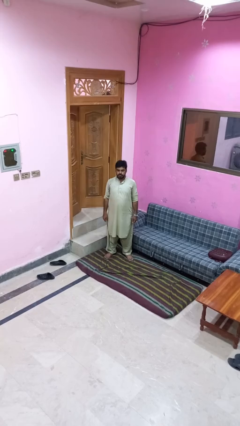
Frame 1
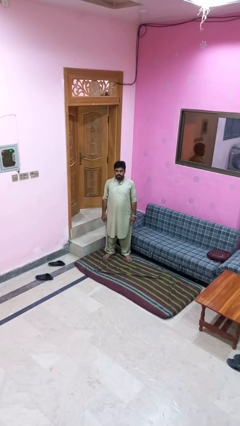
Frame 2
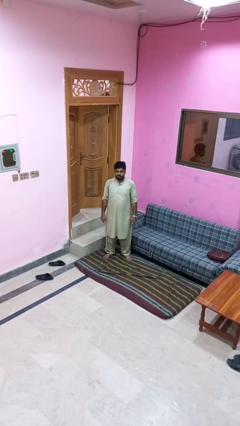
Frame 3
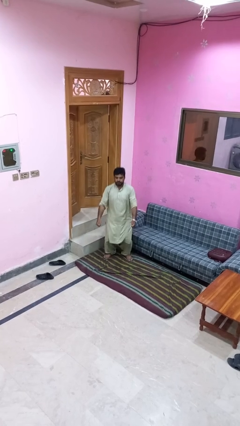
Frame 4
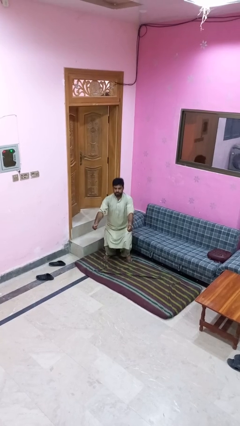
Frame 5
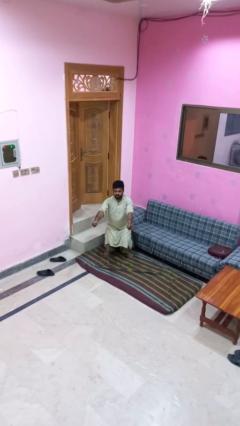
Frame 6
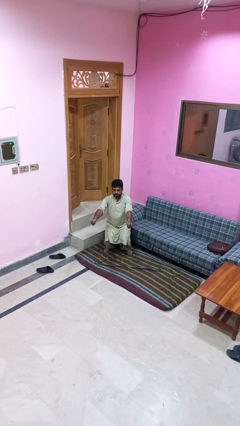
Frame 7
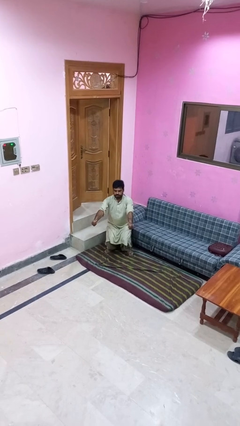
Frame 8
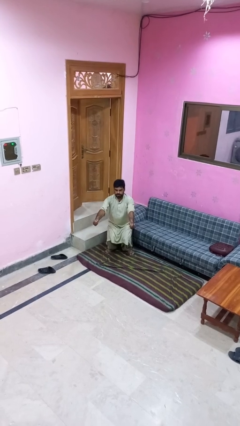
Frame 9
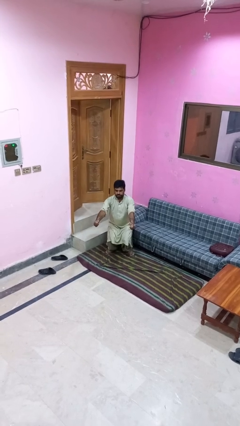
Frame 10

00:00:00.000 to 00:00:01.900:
person squats

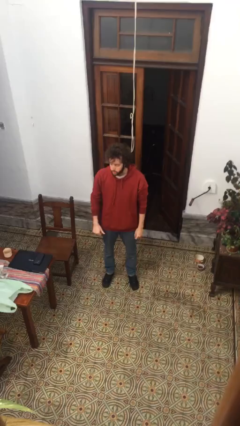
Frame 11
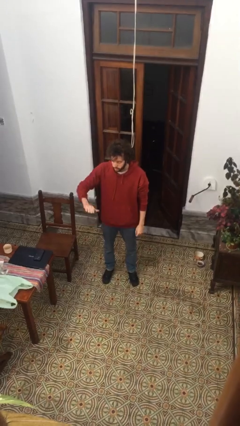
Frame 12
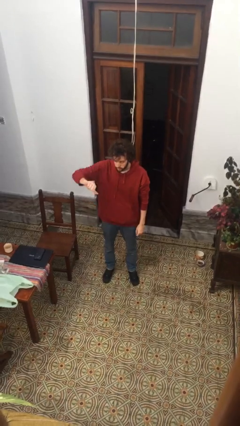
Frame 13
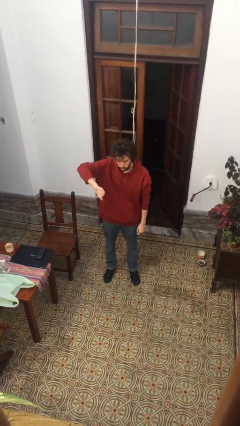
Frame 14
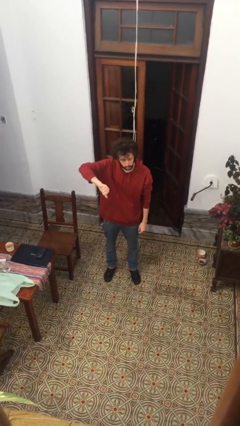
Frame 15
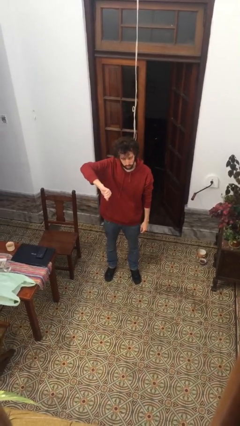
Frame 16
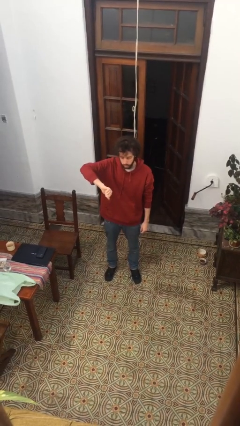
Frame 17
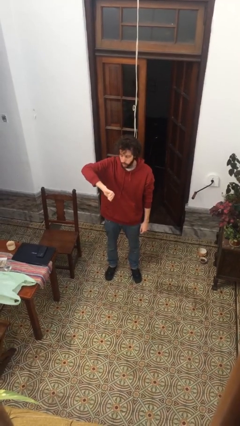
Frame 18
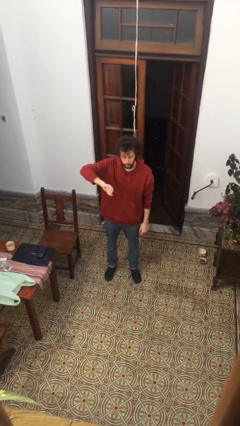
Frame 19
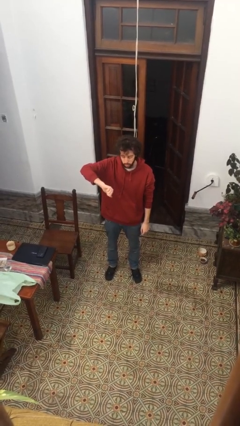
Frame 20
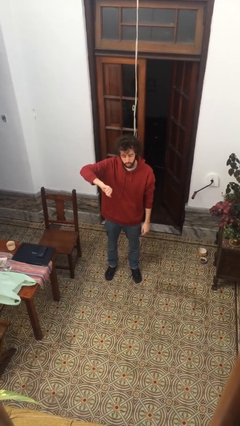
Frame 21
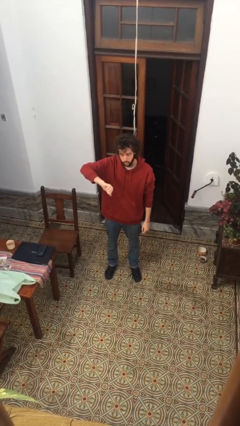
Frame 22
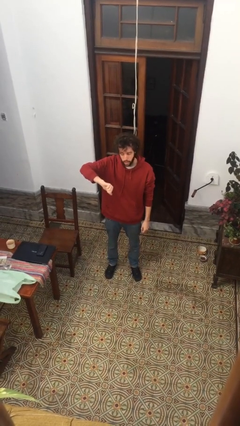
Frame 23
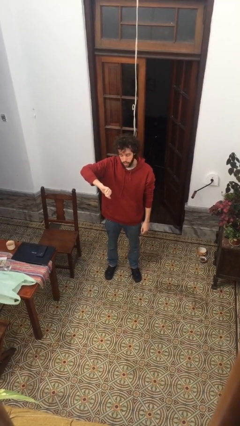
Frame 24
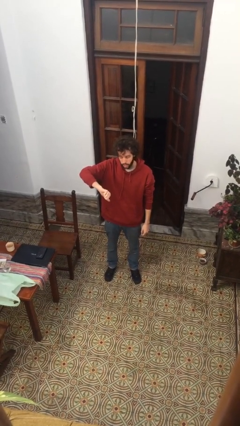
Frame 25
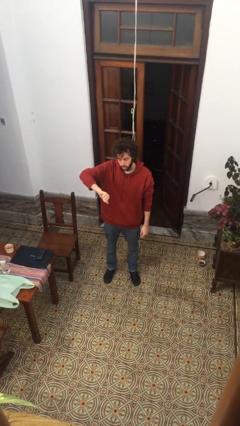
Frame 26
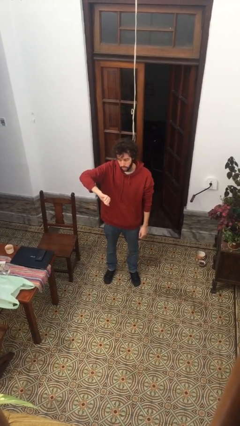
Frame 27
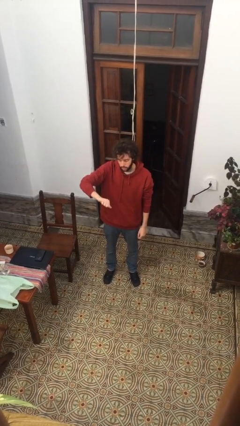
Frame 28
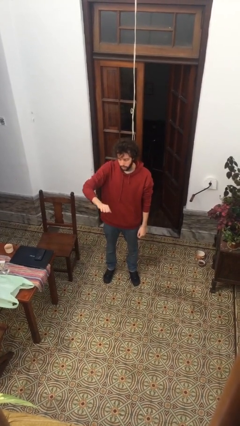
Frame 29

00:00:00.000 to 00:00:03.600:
person gestures thumbs down

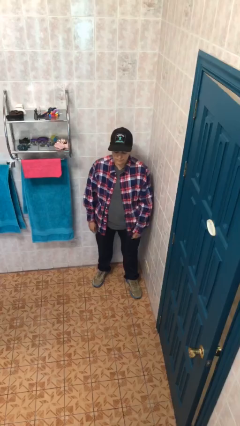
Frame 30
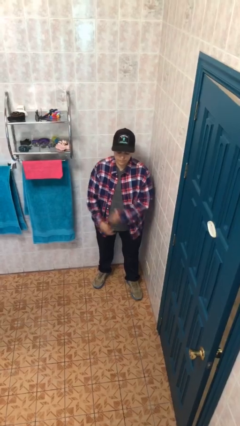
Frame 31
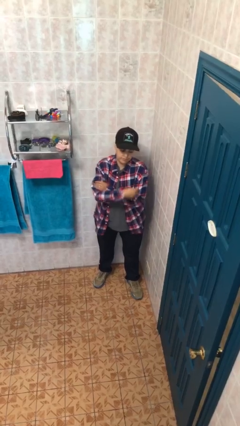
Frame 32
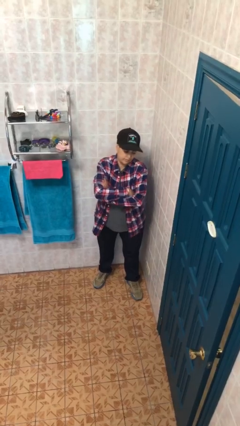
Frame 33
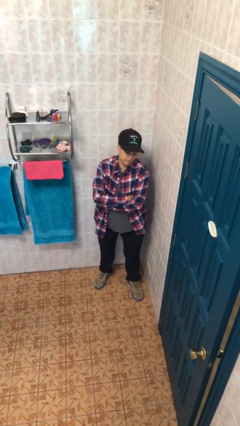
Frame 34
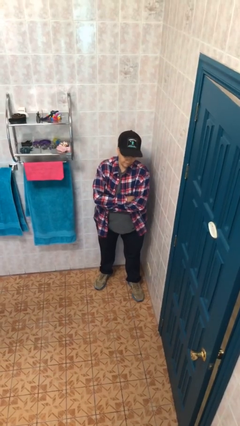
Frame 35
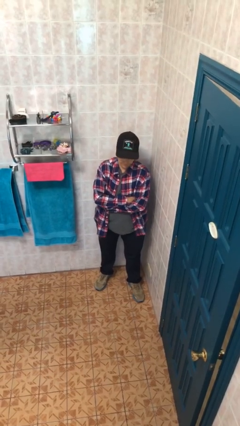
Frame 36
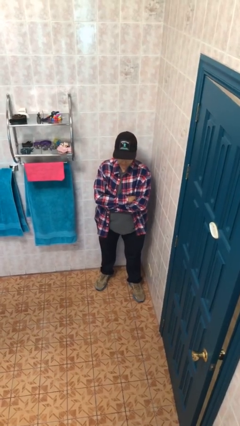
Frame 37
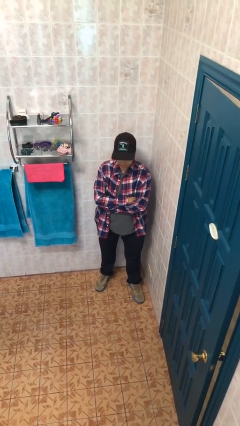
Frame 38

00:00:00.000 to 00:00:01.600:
person crosses arms

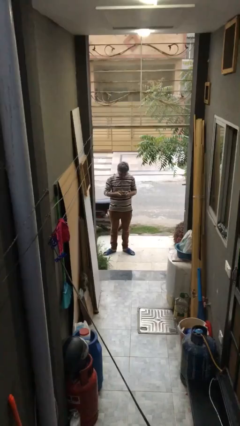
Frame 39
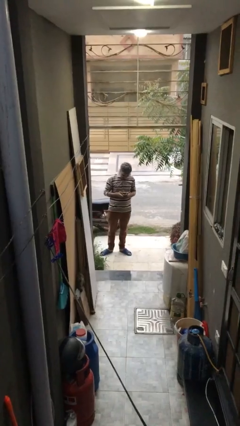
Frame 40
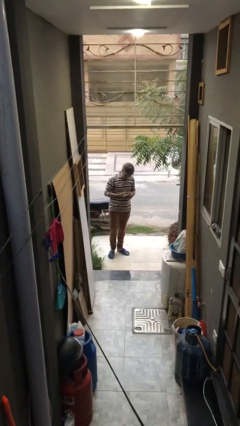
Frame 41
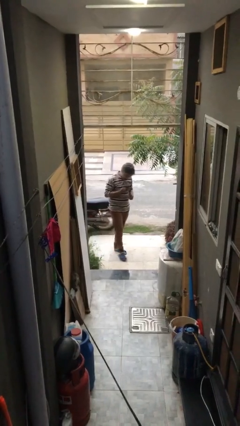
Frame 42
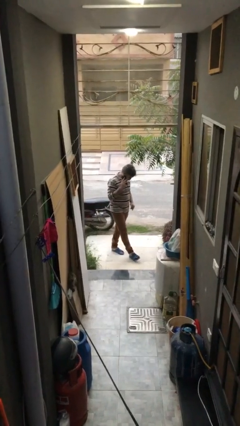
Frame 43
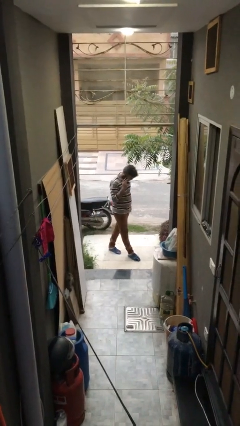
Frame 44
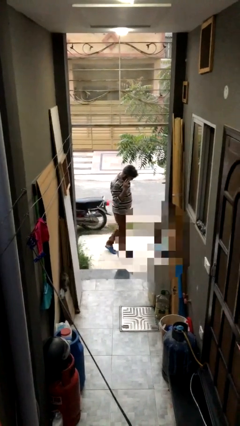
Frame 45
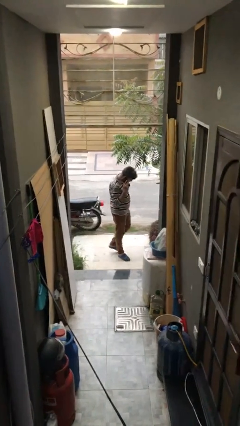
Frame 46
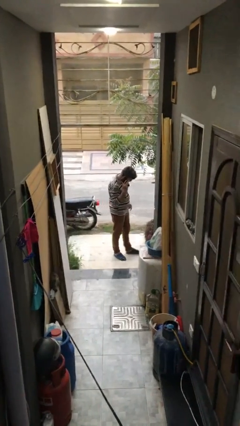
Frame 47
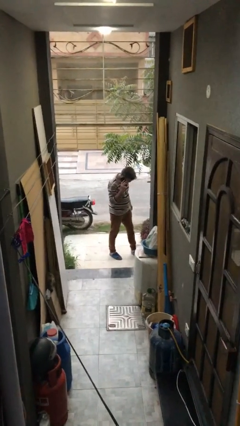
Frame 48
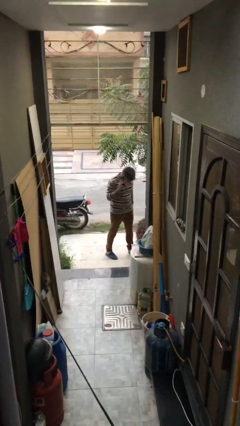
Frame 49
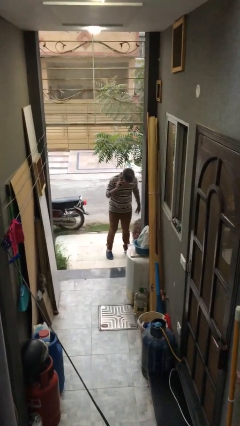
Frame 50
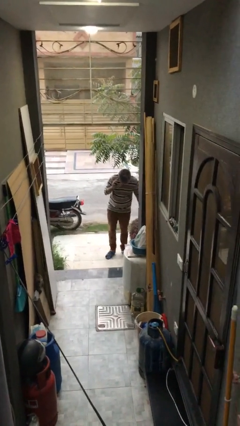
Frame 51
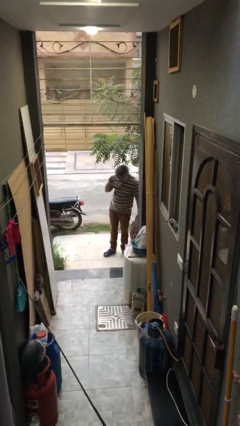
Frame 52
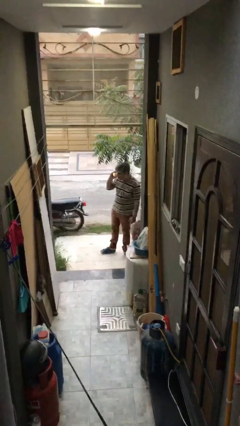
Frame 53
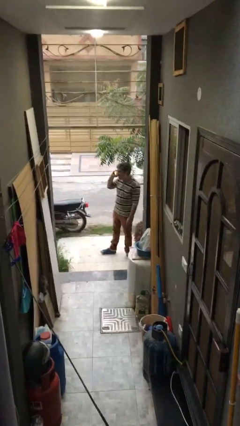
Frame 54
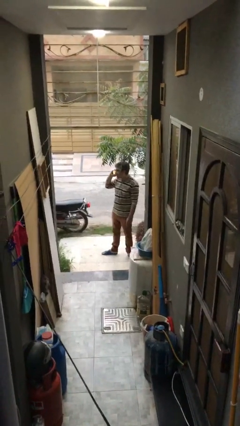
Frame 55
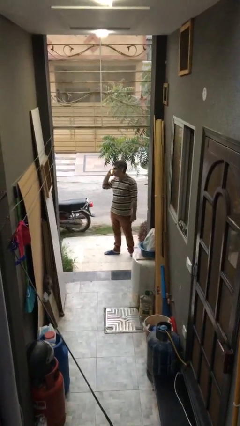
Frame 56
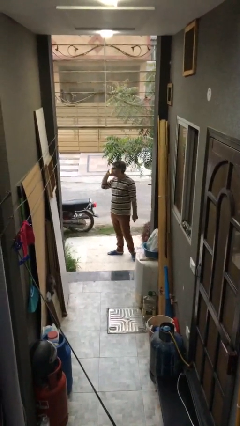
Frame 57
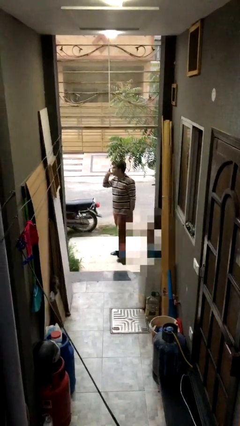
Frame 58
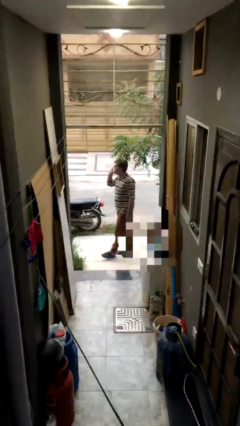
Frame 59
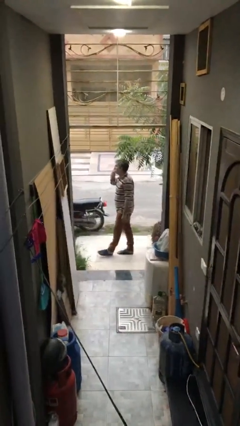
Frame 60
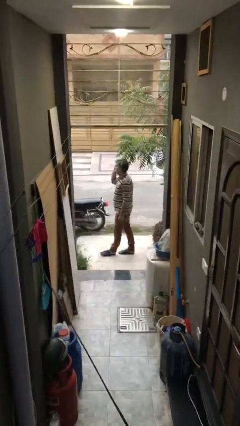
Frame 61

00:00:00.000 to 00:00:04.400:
person talks on phone

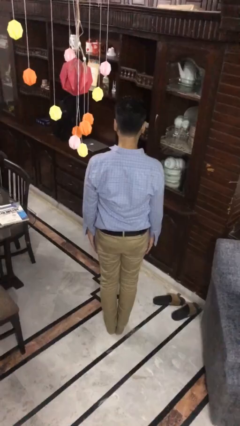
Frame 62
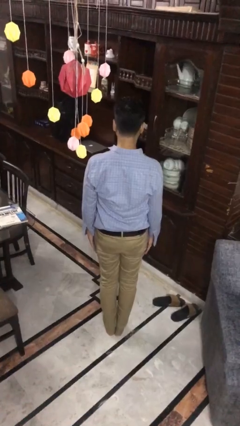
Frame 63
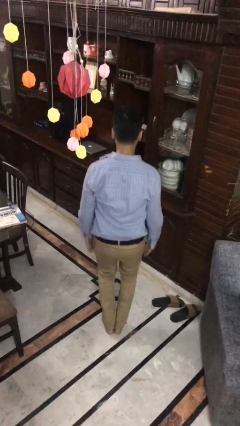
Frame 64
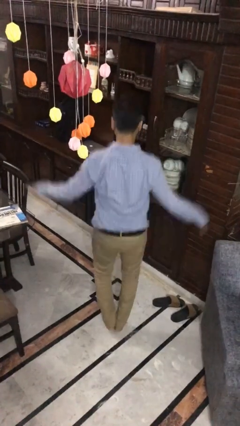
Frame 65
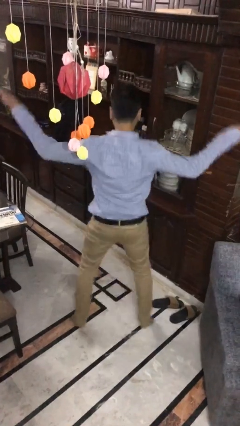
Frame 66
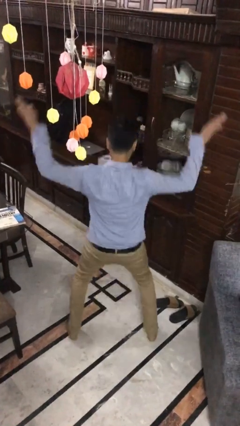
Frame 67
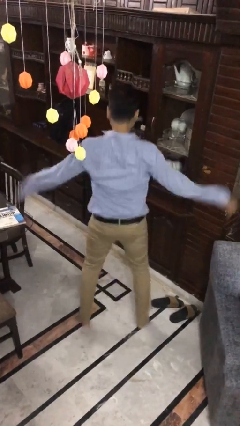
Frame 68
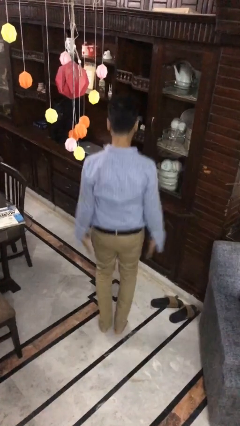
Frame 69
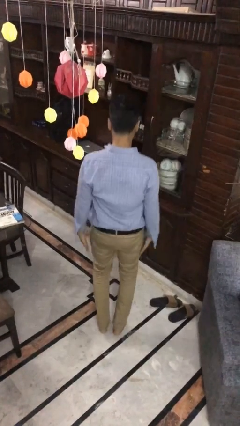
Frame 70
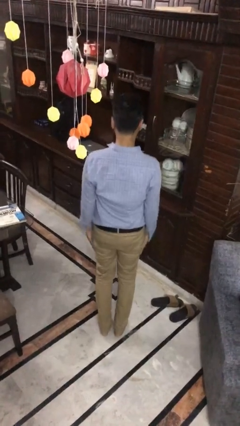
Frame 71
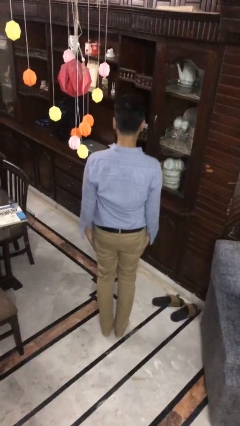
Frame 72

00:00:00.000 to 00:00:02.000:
person exercises with jumping jacks

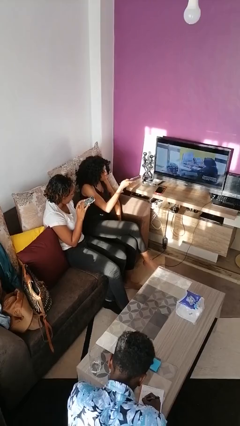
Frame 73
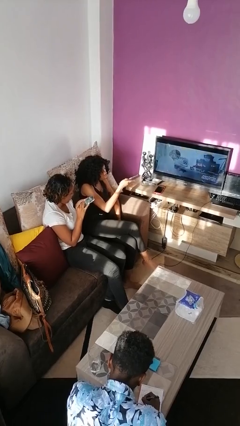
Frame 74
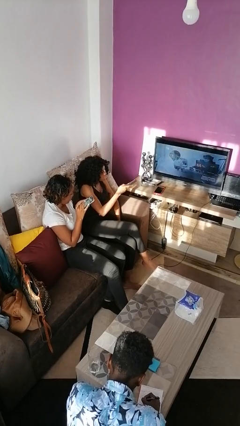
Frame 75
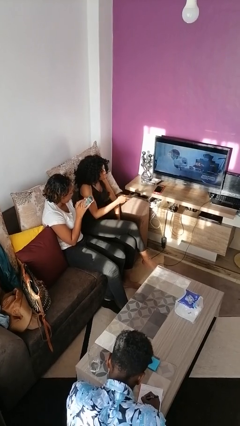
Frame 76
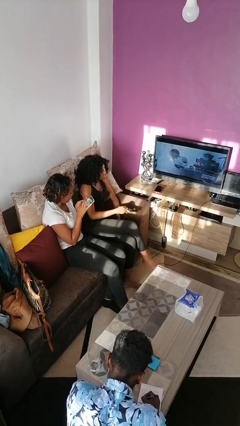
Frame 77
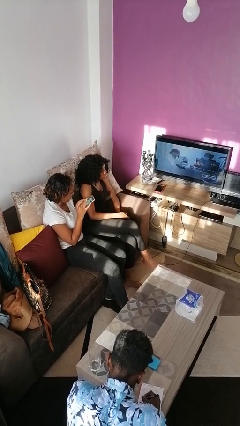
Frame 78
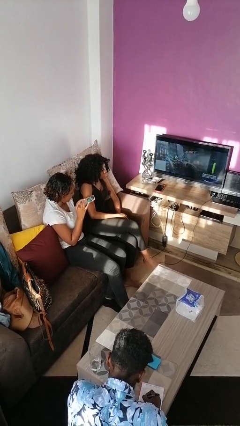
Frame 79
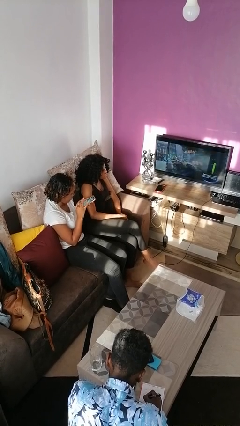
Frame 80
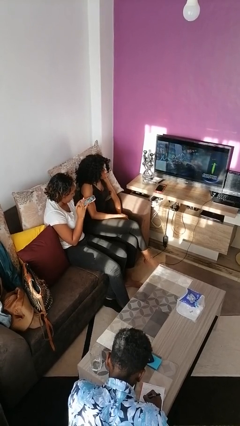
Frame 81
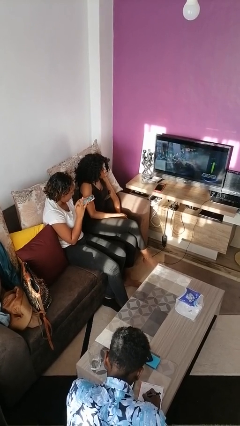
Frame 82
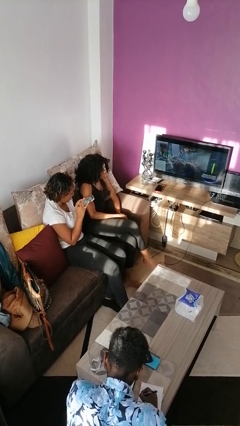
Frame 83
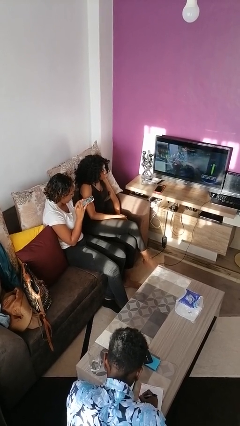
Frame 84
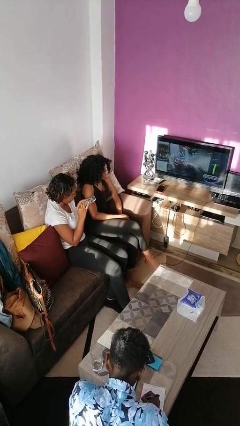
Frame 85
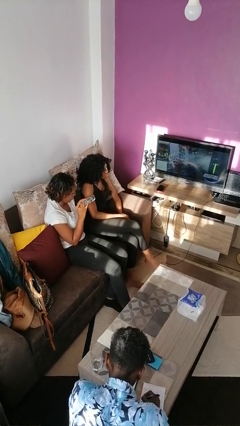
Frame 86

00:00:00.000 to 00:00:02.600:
person takes off boots

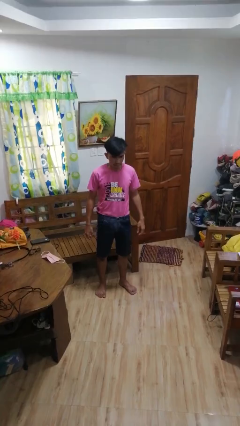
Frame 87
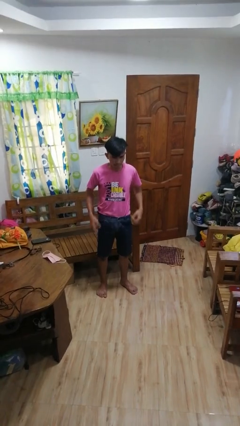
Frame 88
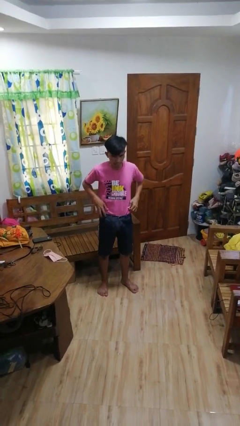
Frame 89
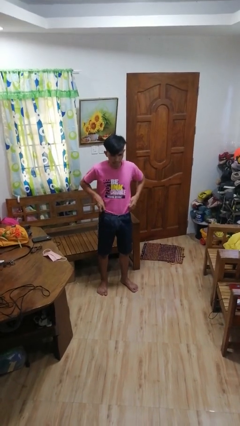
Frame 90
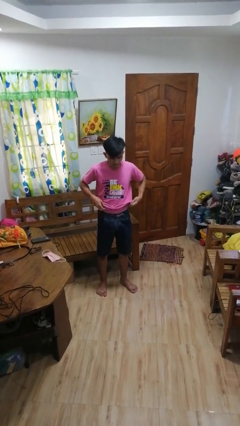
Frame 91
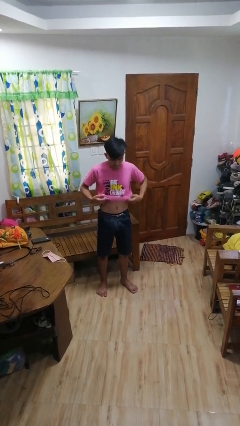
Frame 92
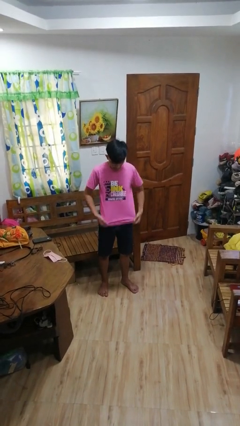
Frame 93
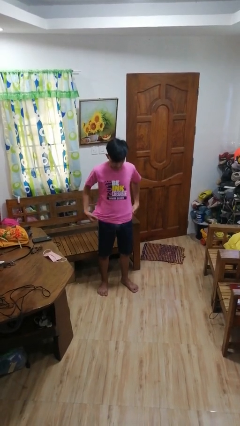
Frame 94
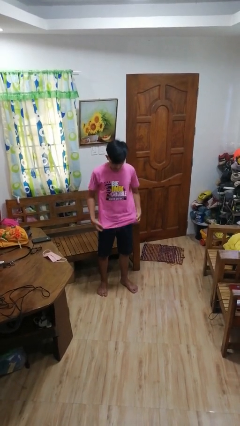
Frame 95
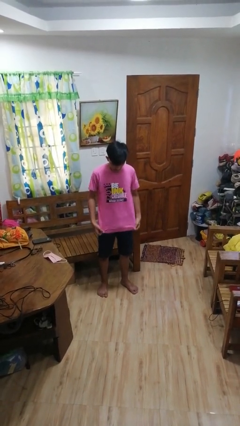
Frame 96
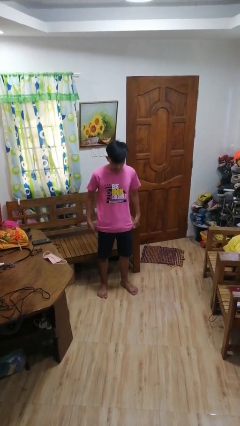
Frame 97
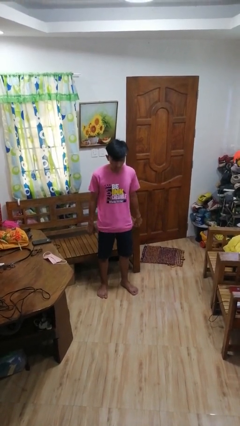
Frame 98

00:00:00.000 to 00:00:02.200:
person untucks shirt
